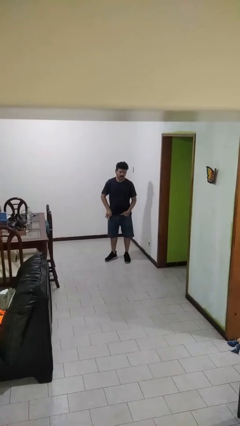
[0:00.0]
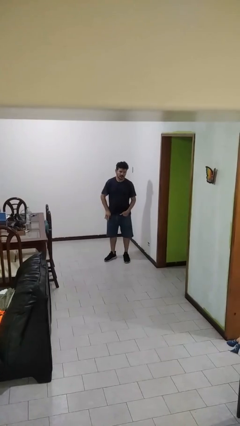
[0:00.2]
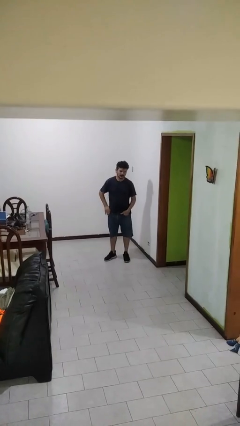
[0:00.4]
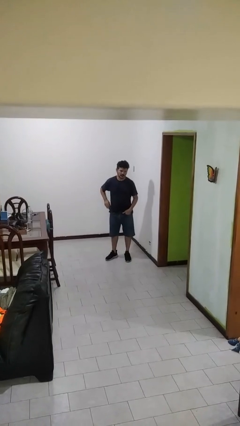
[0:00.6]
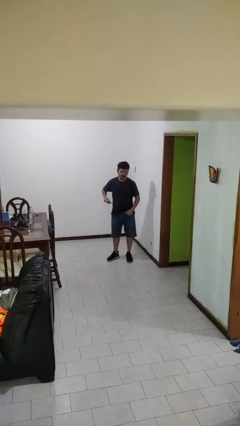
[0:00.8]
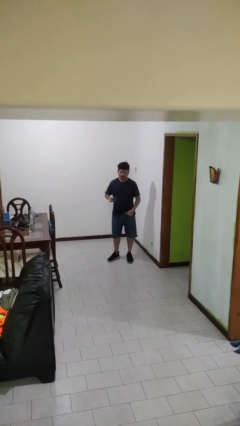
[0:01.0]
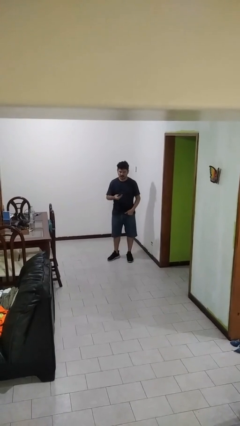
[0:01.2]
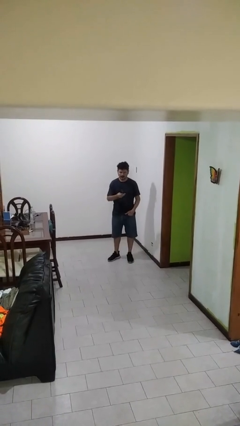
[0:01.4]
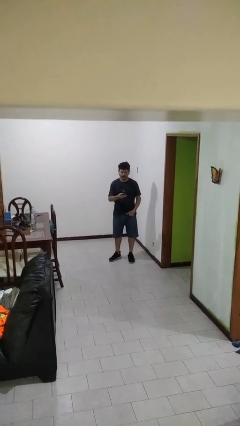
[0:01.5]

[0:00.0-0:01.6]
person takes phone from pocket

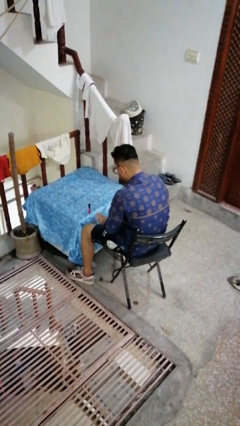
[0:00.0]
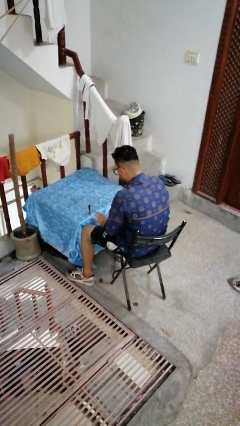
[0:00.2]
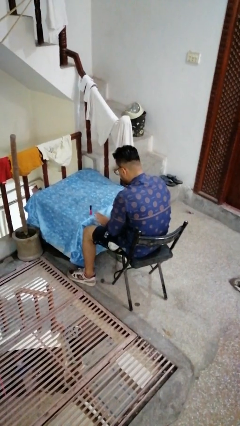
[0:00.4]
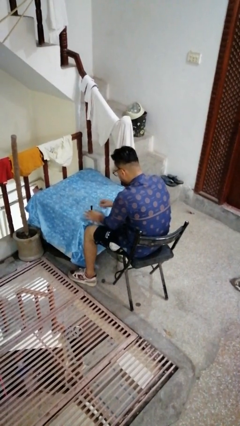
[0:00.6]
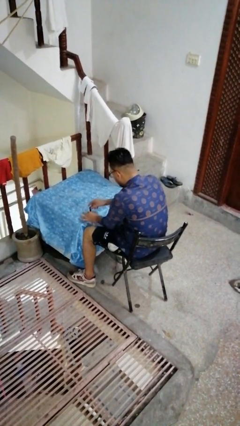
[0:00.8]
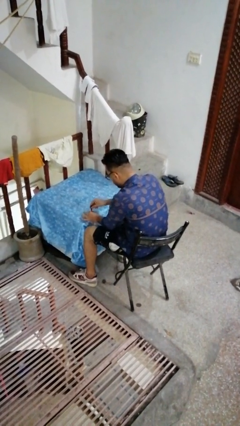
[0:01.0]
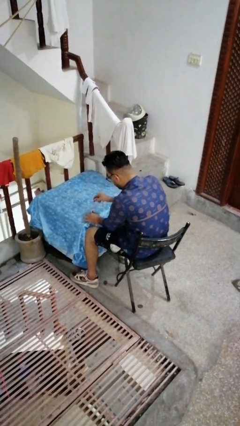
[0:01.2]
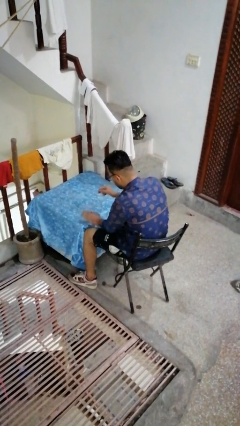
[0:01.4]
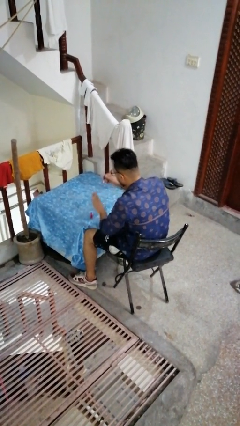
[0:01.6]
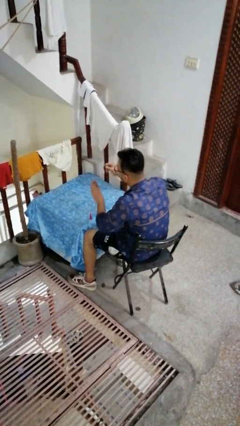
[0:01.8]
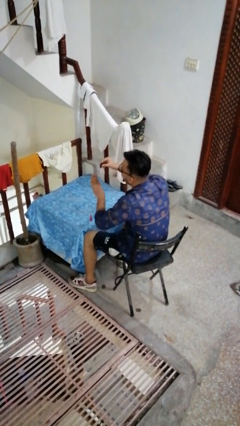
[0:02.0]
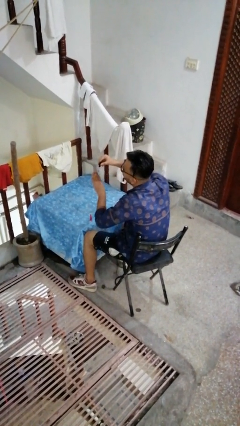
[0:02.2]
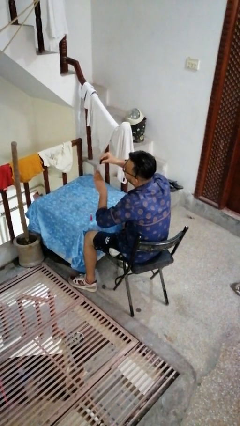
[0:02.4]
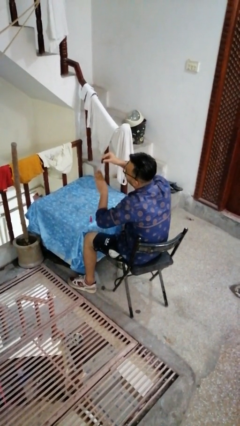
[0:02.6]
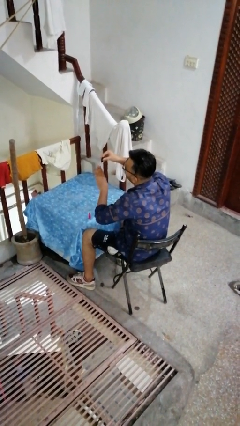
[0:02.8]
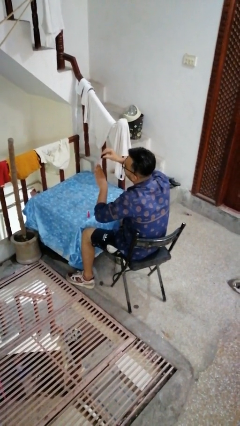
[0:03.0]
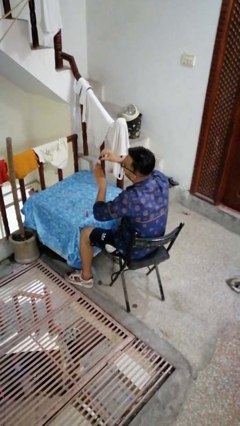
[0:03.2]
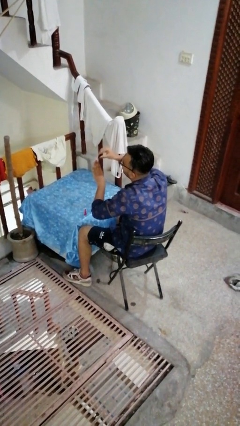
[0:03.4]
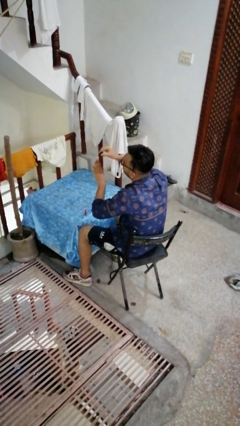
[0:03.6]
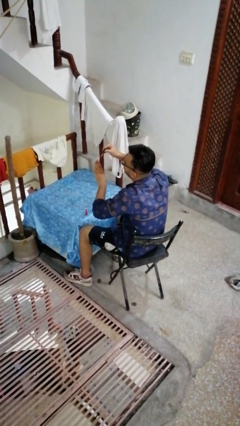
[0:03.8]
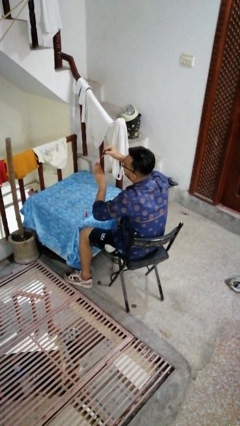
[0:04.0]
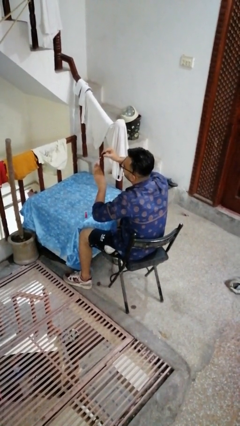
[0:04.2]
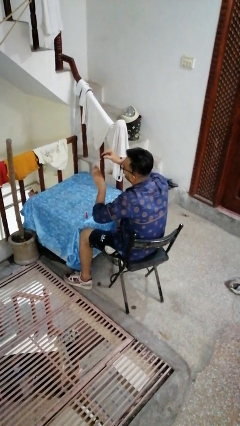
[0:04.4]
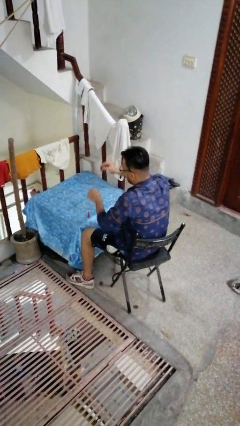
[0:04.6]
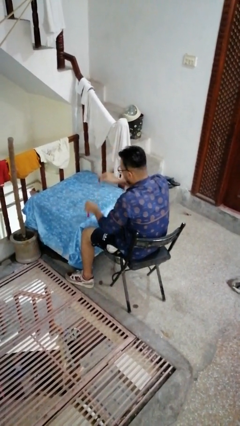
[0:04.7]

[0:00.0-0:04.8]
person paints fingernails

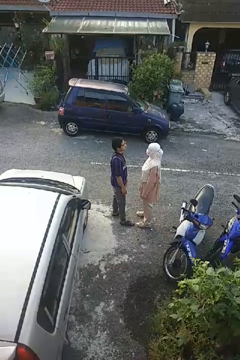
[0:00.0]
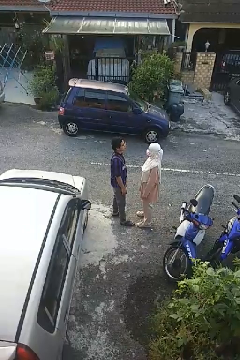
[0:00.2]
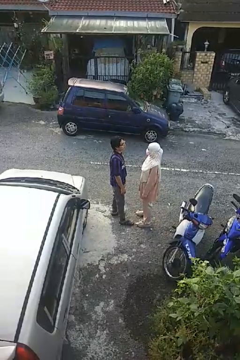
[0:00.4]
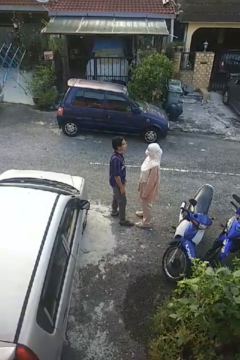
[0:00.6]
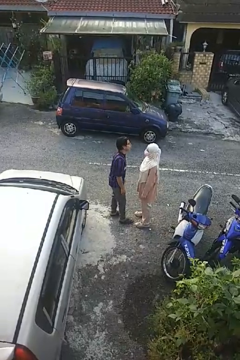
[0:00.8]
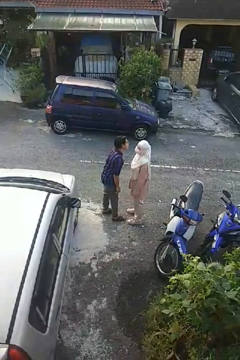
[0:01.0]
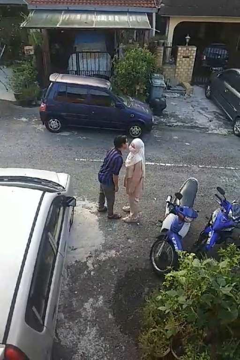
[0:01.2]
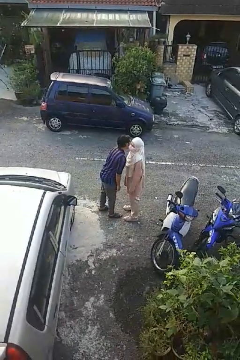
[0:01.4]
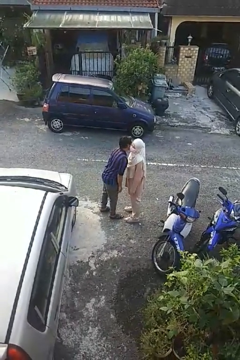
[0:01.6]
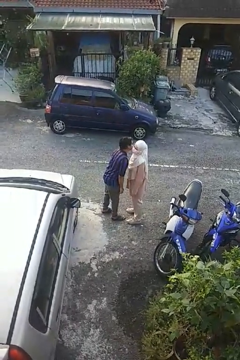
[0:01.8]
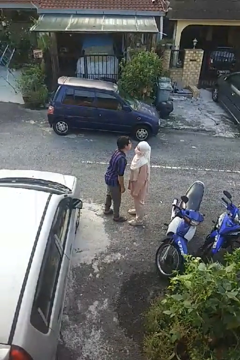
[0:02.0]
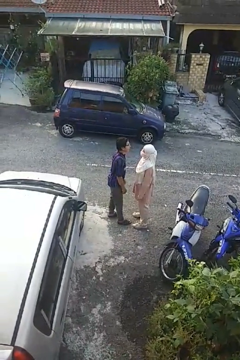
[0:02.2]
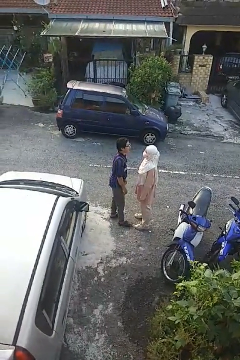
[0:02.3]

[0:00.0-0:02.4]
person kisses cheek of person

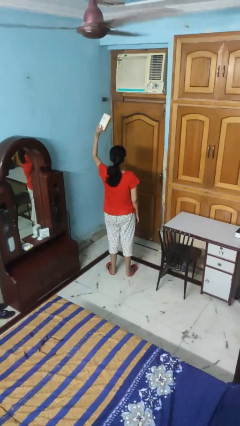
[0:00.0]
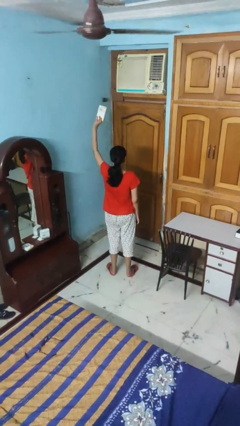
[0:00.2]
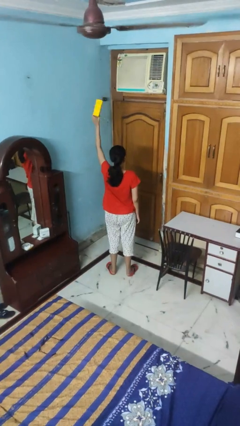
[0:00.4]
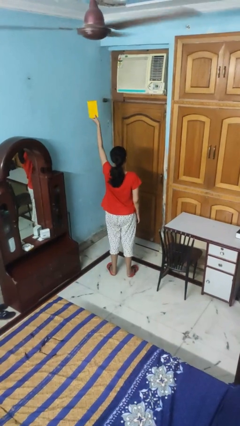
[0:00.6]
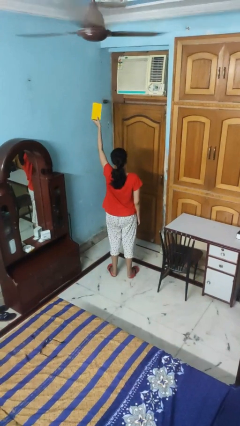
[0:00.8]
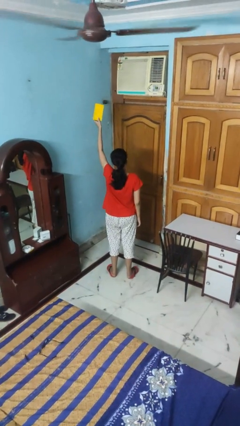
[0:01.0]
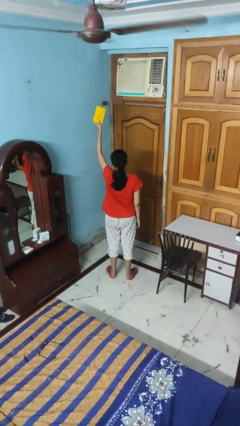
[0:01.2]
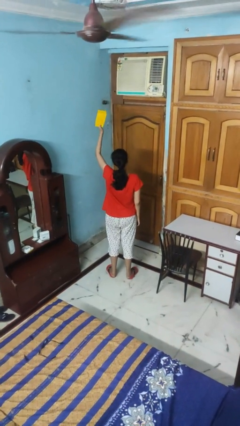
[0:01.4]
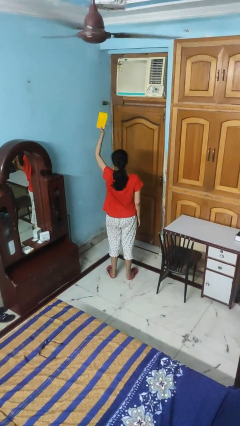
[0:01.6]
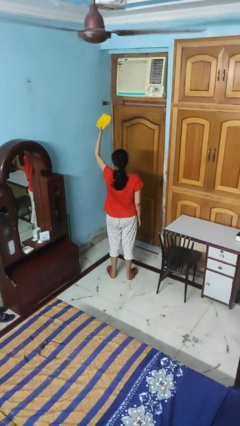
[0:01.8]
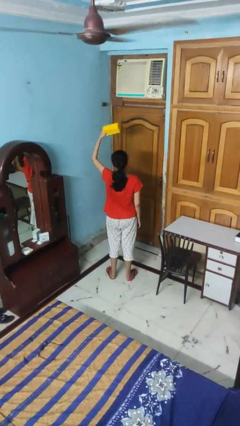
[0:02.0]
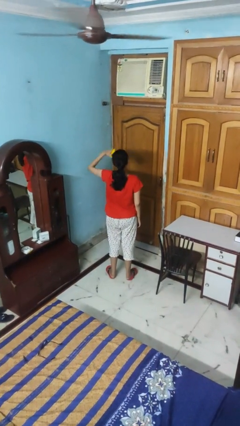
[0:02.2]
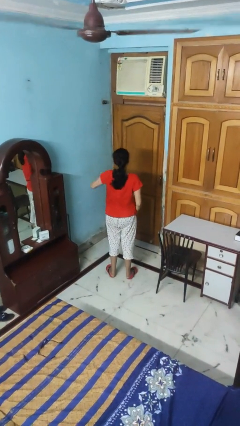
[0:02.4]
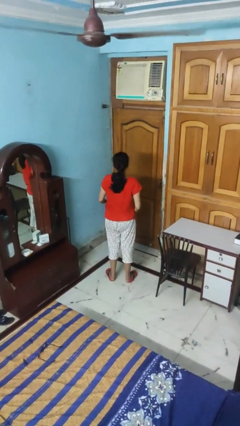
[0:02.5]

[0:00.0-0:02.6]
person holds object above head

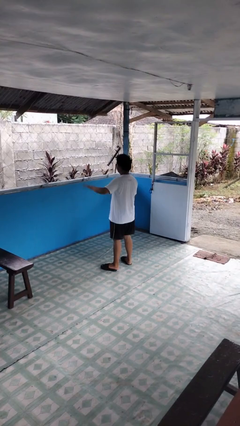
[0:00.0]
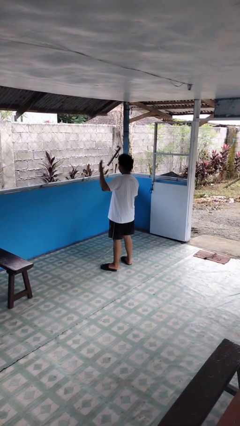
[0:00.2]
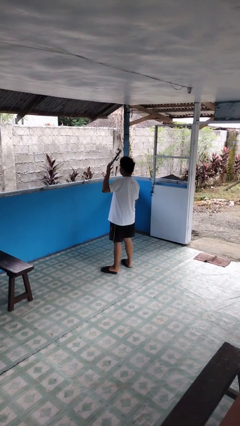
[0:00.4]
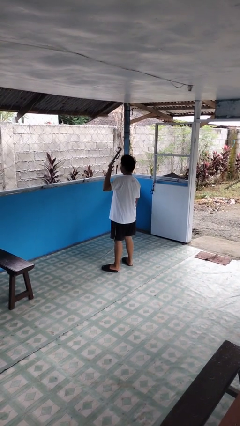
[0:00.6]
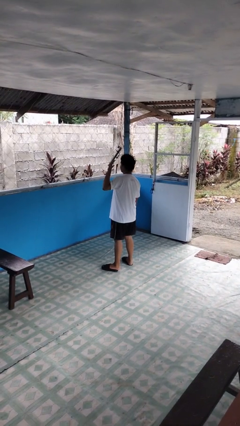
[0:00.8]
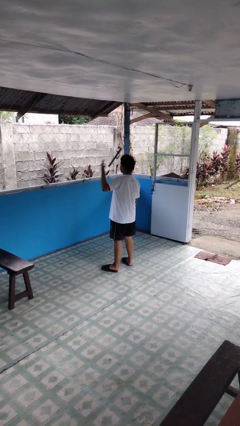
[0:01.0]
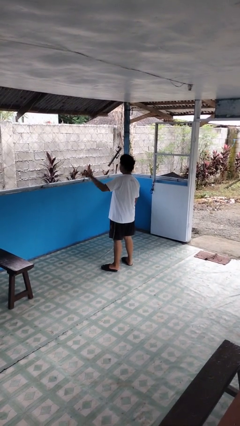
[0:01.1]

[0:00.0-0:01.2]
person gestures number five

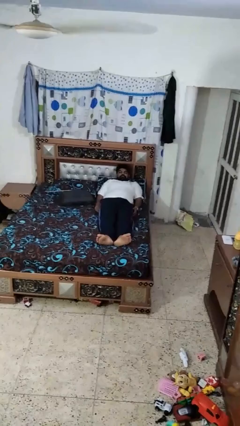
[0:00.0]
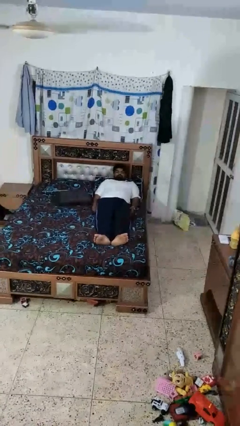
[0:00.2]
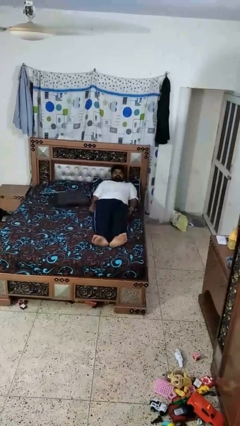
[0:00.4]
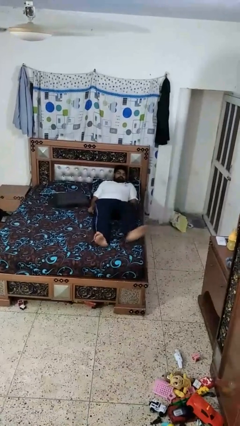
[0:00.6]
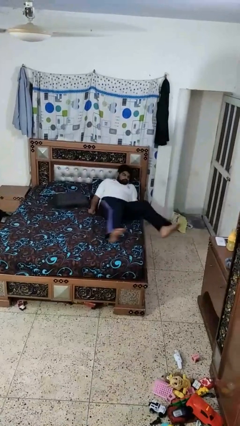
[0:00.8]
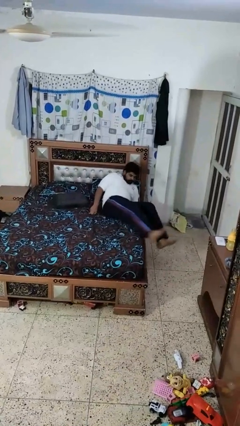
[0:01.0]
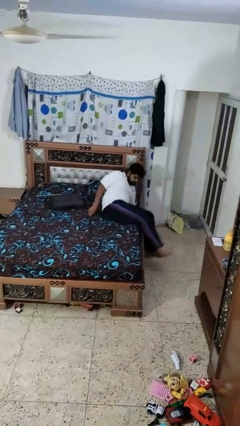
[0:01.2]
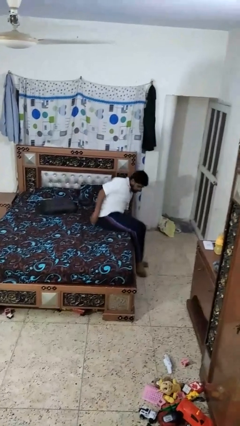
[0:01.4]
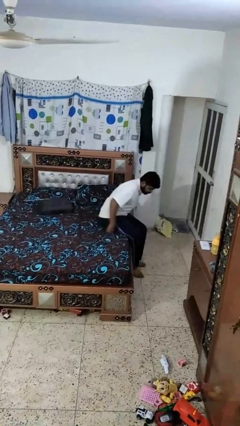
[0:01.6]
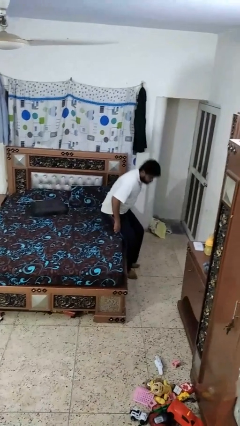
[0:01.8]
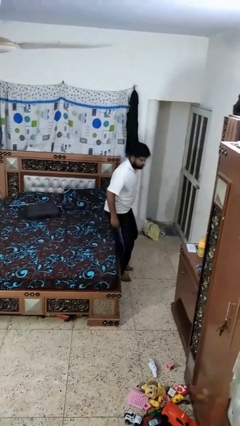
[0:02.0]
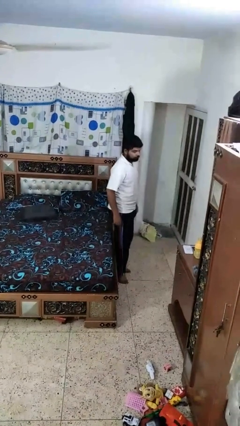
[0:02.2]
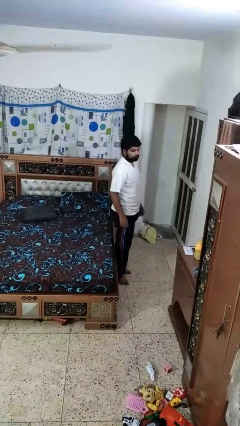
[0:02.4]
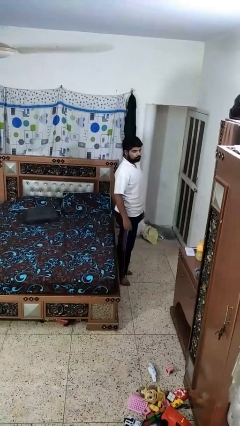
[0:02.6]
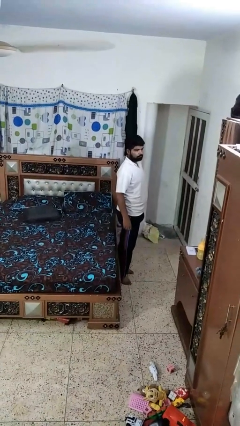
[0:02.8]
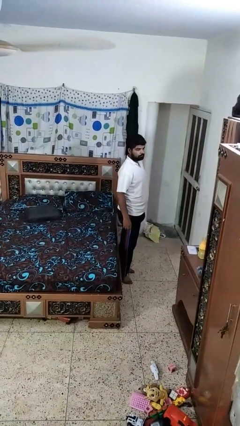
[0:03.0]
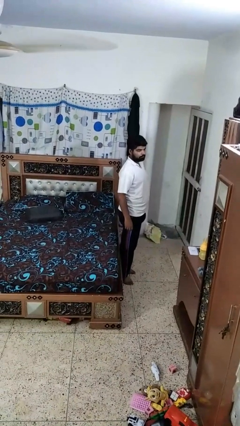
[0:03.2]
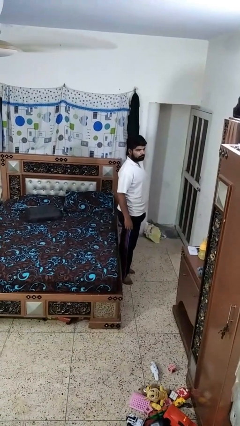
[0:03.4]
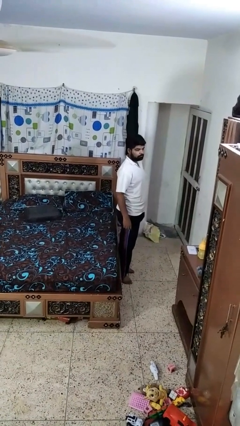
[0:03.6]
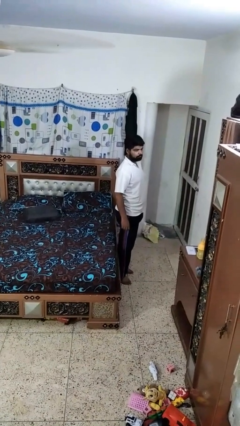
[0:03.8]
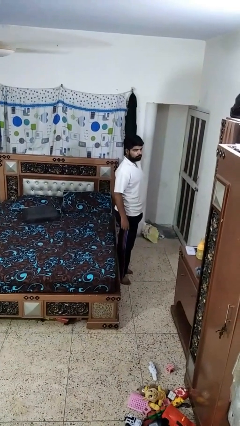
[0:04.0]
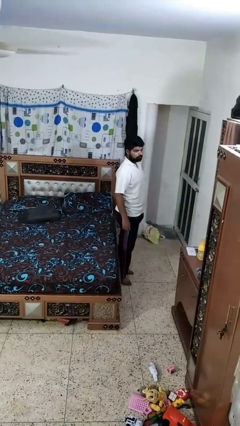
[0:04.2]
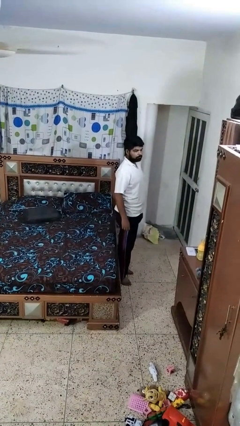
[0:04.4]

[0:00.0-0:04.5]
person stands up

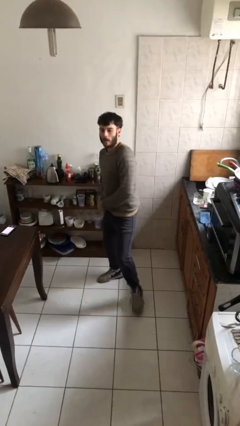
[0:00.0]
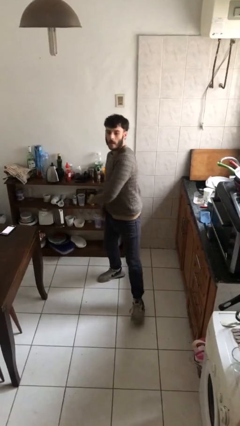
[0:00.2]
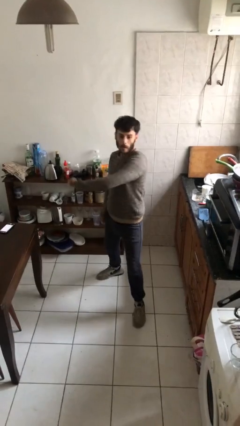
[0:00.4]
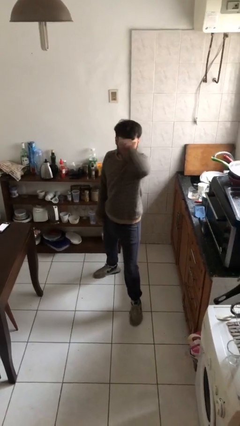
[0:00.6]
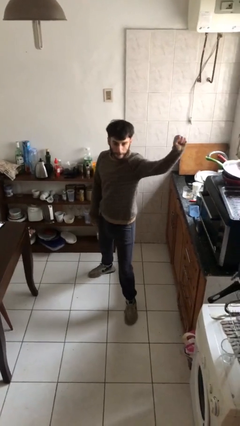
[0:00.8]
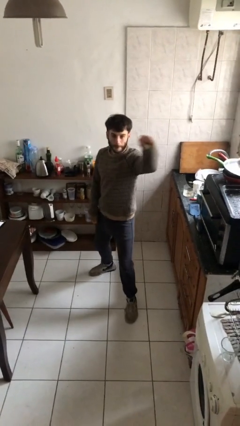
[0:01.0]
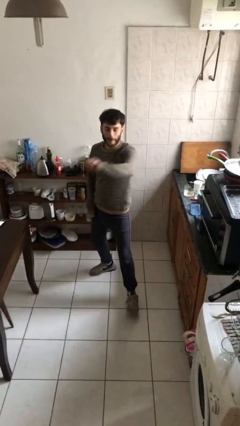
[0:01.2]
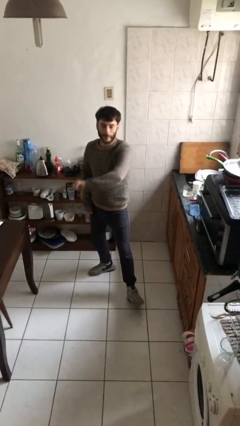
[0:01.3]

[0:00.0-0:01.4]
person karate chop
